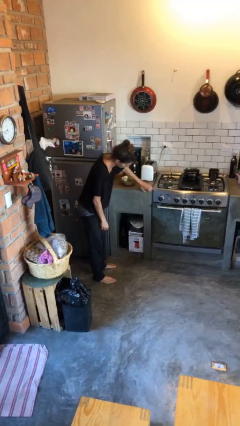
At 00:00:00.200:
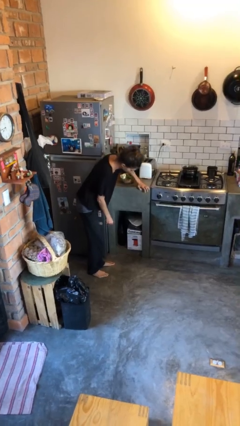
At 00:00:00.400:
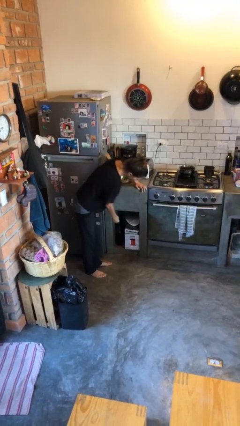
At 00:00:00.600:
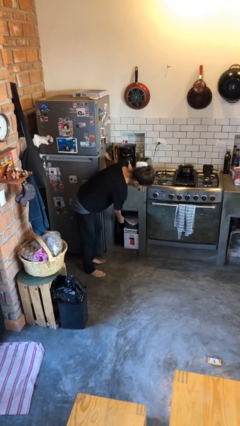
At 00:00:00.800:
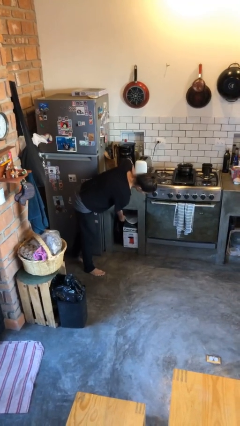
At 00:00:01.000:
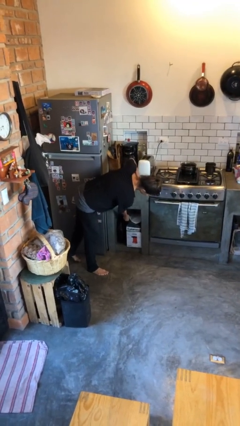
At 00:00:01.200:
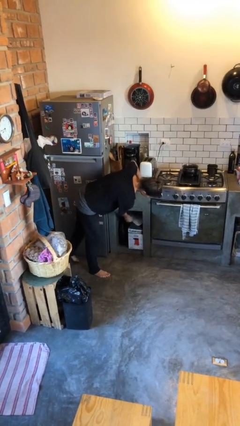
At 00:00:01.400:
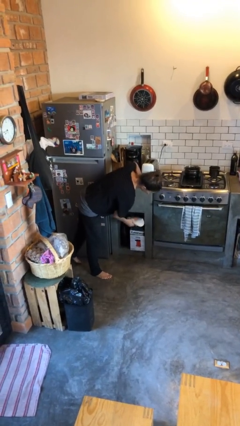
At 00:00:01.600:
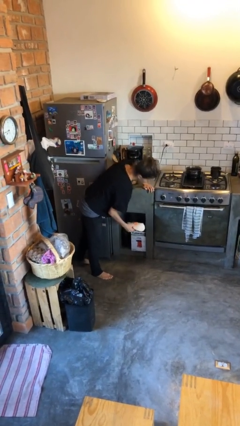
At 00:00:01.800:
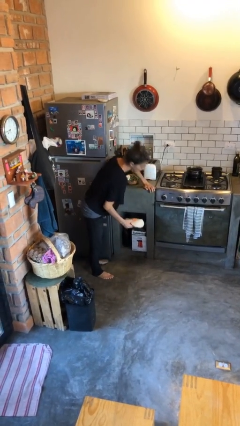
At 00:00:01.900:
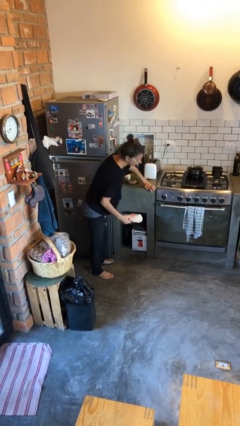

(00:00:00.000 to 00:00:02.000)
person picks up object from cabinet

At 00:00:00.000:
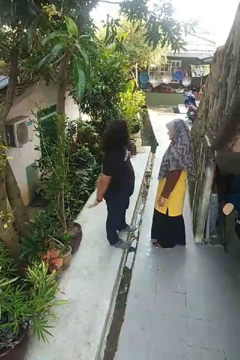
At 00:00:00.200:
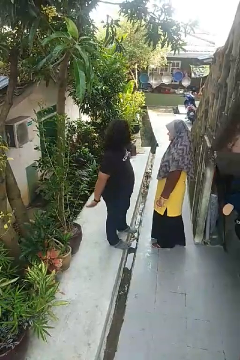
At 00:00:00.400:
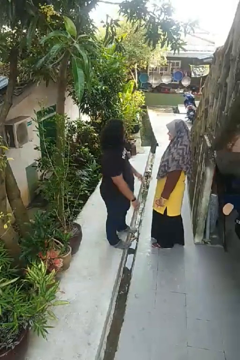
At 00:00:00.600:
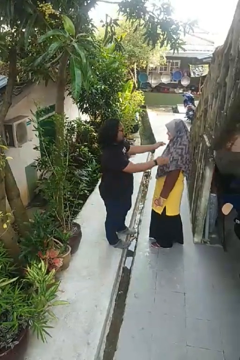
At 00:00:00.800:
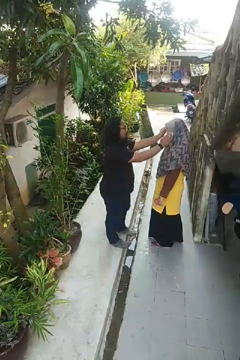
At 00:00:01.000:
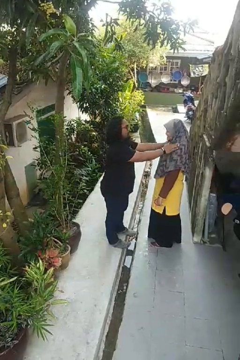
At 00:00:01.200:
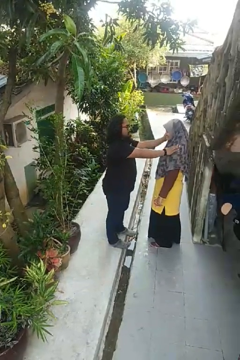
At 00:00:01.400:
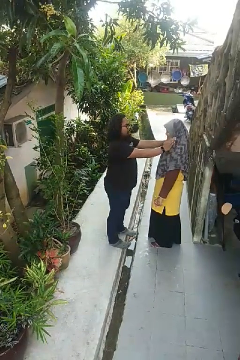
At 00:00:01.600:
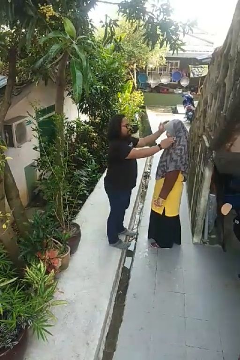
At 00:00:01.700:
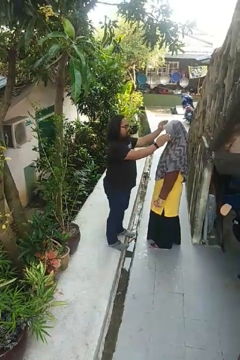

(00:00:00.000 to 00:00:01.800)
person pounds shoulders of person

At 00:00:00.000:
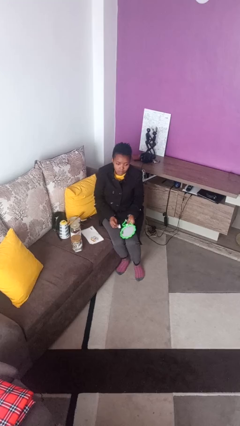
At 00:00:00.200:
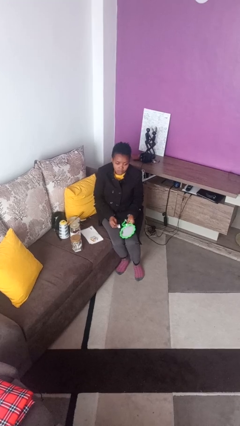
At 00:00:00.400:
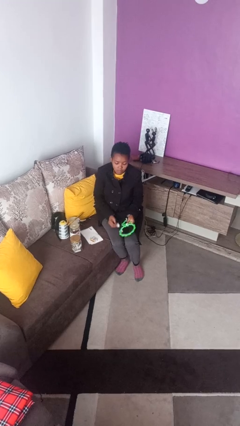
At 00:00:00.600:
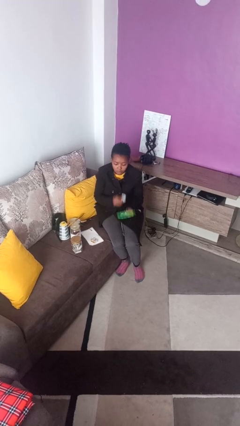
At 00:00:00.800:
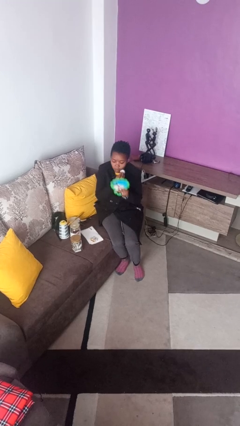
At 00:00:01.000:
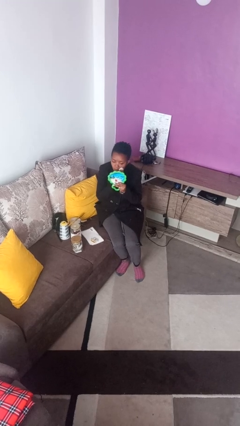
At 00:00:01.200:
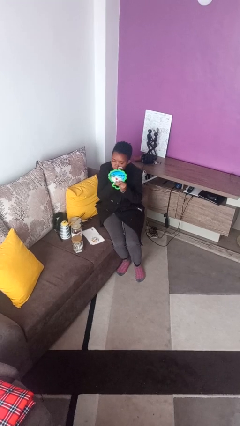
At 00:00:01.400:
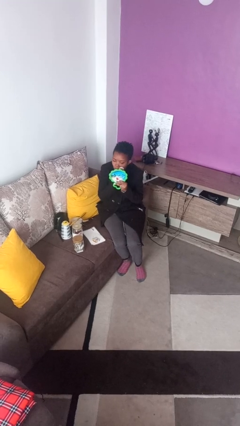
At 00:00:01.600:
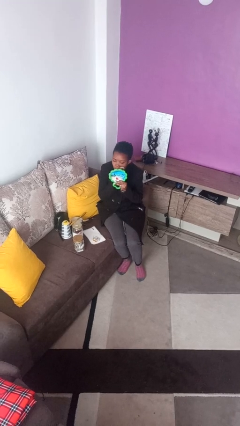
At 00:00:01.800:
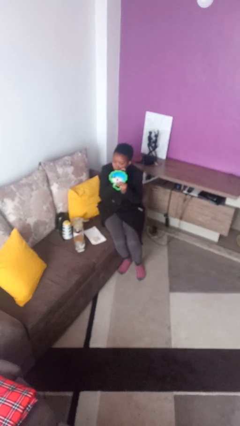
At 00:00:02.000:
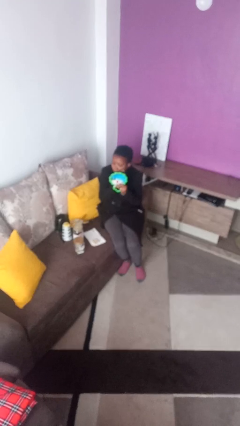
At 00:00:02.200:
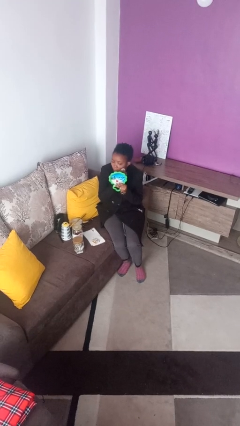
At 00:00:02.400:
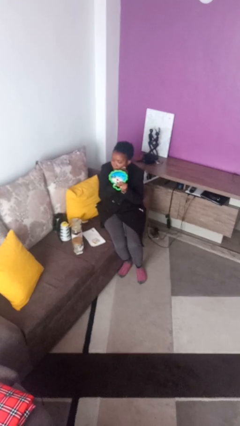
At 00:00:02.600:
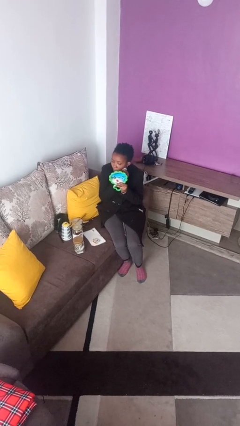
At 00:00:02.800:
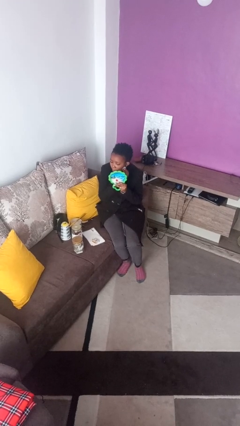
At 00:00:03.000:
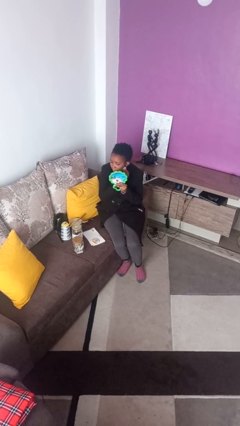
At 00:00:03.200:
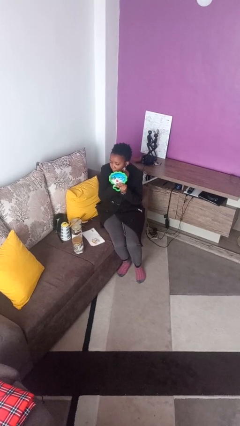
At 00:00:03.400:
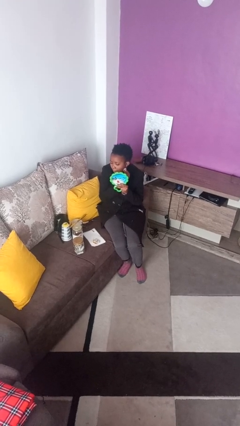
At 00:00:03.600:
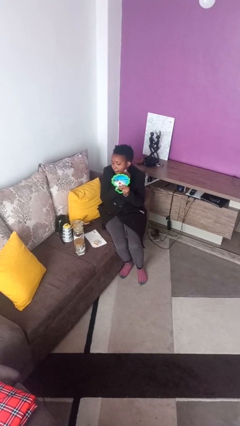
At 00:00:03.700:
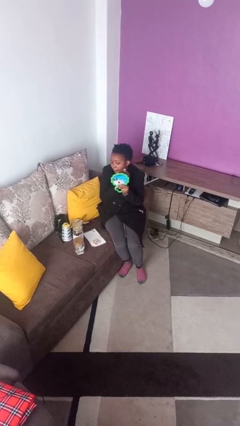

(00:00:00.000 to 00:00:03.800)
person applies foundation makeup

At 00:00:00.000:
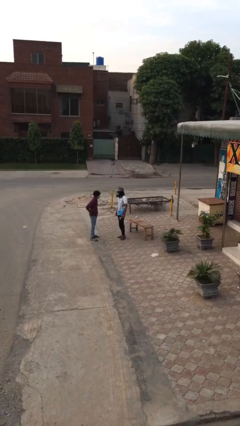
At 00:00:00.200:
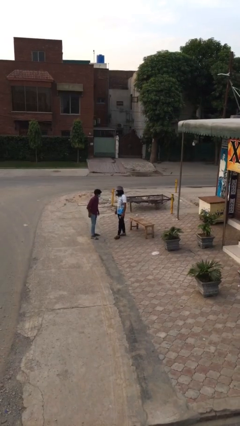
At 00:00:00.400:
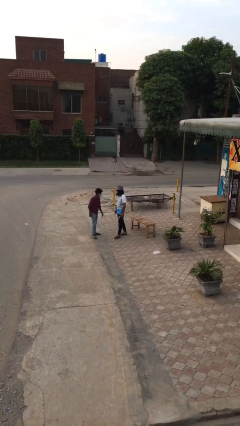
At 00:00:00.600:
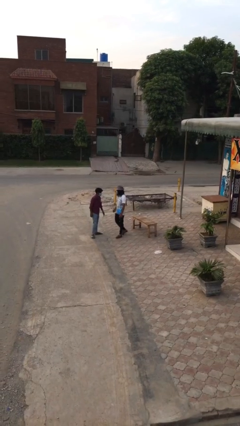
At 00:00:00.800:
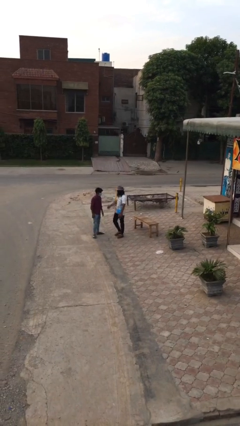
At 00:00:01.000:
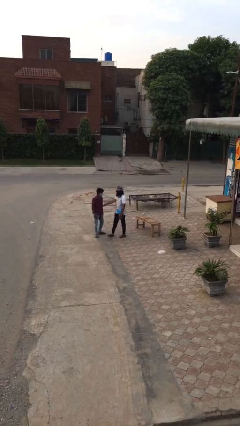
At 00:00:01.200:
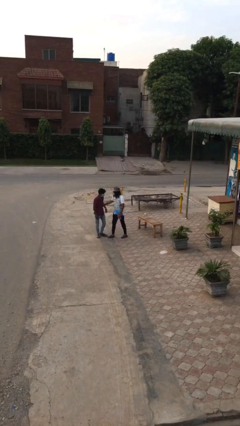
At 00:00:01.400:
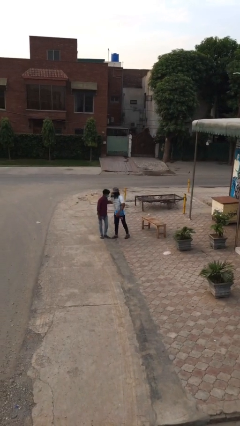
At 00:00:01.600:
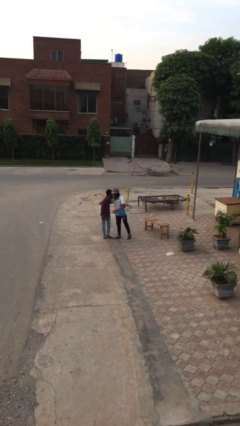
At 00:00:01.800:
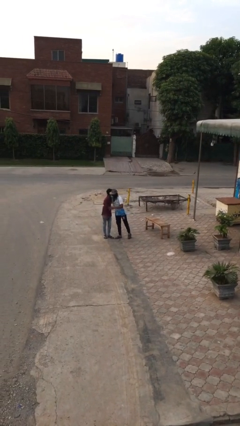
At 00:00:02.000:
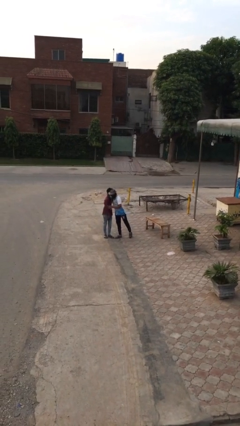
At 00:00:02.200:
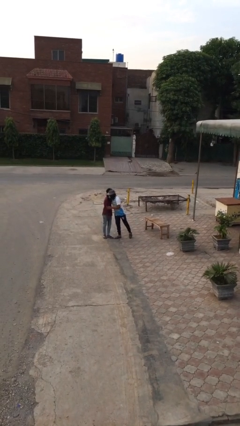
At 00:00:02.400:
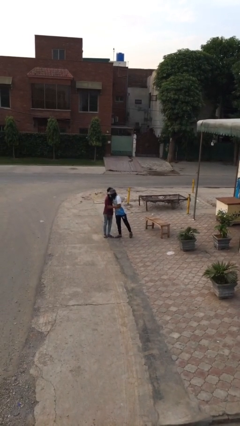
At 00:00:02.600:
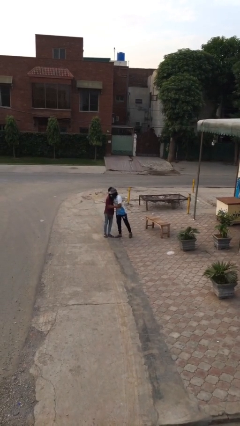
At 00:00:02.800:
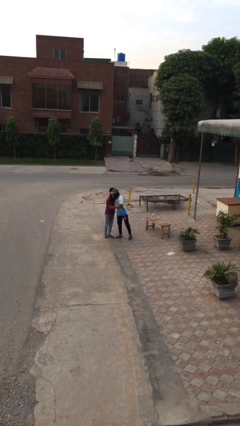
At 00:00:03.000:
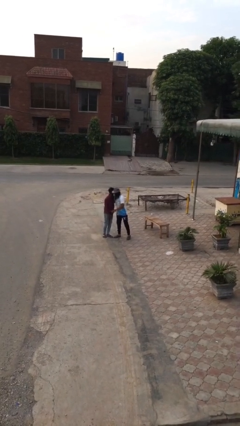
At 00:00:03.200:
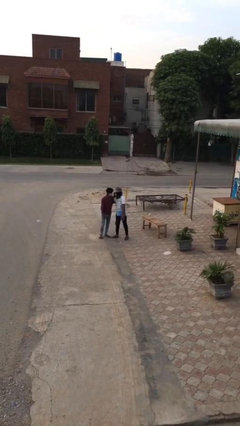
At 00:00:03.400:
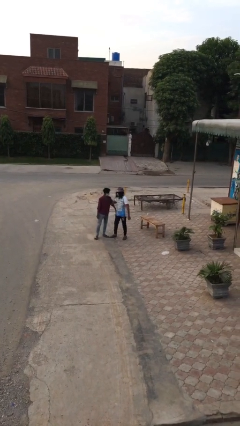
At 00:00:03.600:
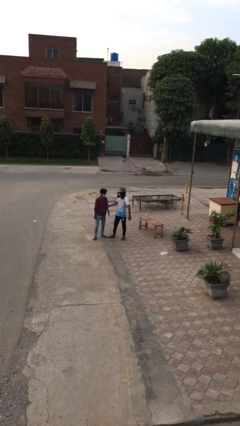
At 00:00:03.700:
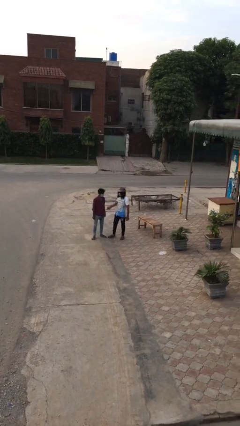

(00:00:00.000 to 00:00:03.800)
person embraces person

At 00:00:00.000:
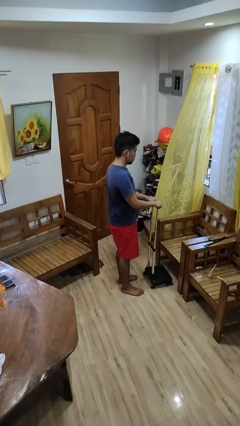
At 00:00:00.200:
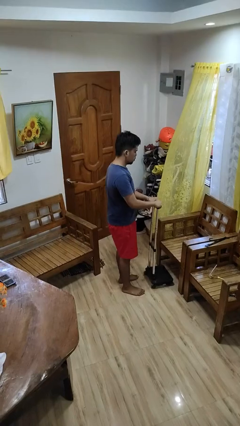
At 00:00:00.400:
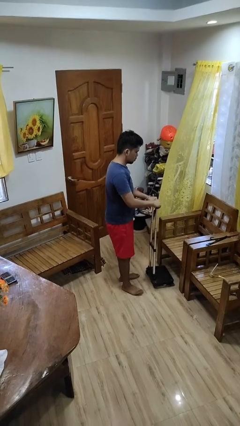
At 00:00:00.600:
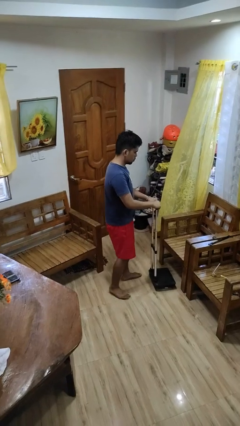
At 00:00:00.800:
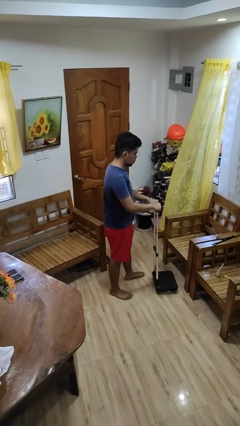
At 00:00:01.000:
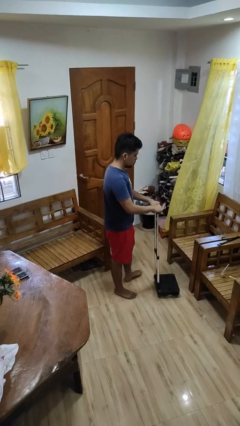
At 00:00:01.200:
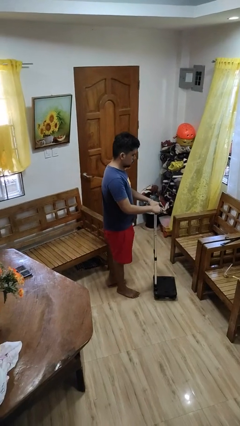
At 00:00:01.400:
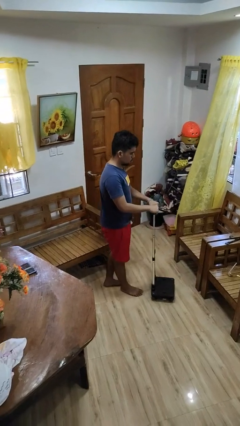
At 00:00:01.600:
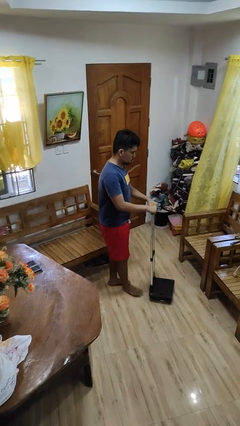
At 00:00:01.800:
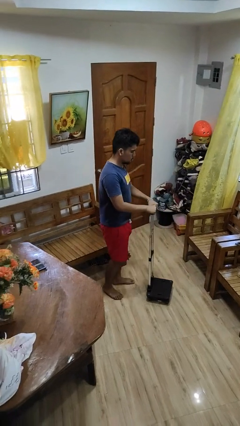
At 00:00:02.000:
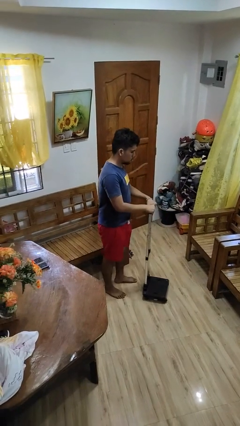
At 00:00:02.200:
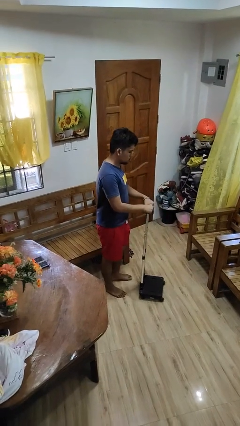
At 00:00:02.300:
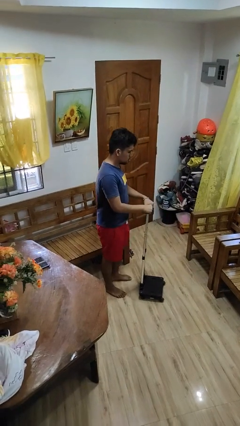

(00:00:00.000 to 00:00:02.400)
person pulls wheeled cart

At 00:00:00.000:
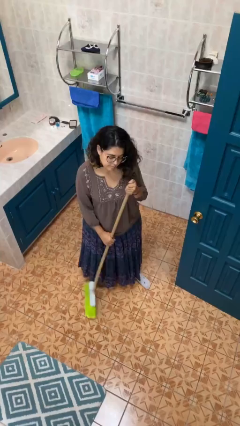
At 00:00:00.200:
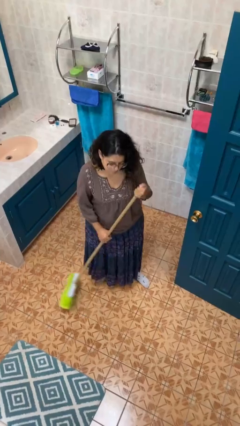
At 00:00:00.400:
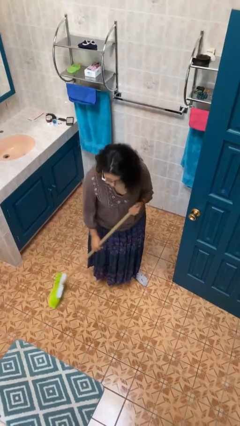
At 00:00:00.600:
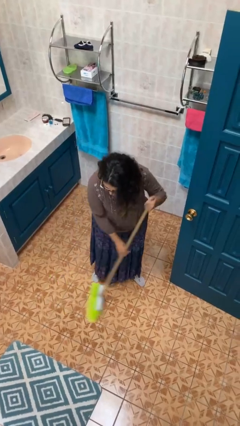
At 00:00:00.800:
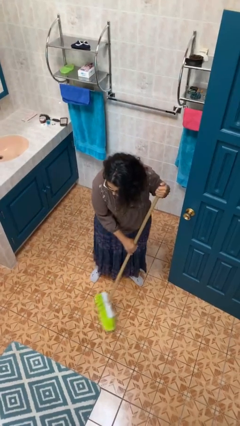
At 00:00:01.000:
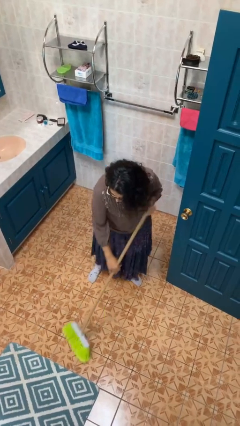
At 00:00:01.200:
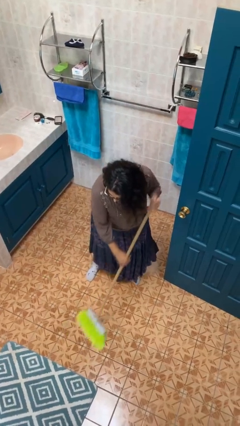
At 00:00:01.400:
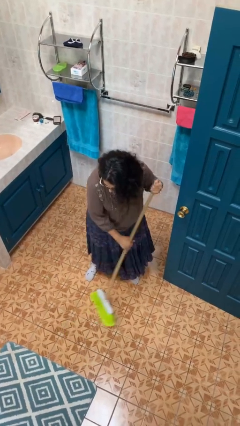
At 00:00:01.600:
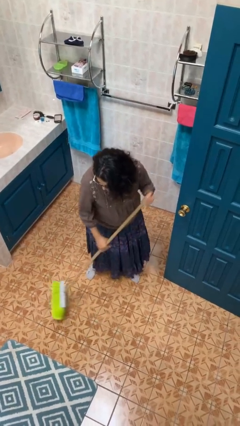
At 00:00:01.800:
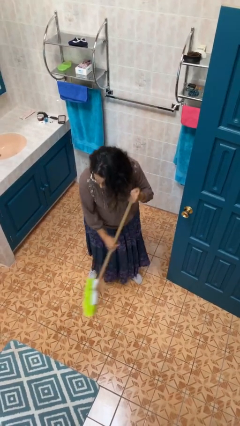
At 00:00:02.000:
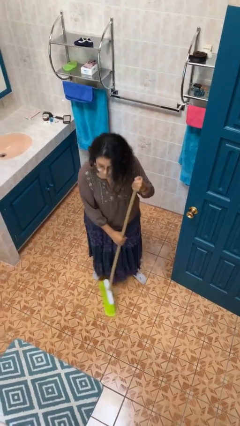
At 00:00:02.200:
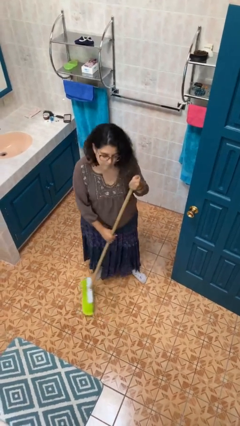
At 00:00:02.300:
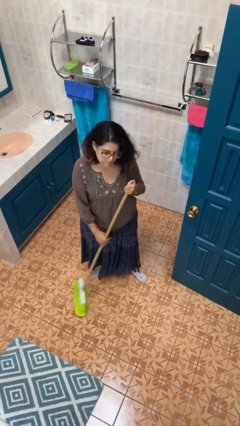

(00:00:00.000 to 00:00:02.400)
person sweeps floor

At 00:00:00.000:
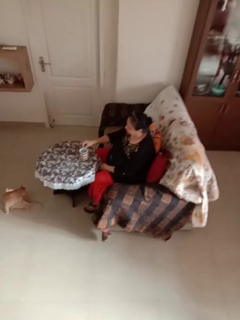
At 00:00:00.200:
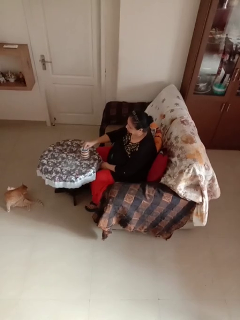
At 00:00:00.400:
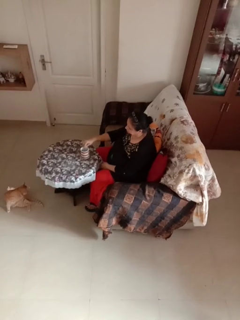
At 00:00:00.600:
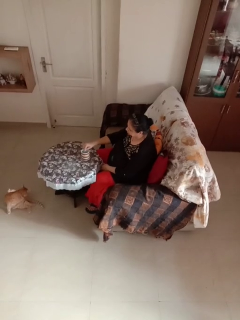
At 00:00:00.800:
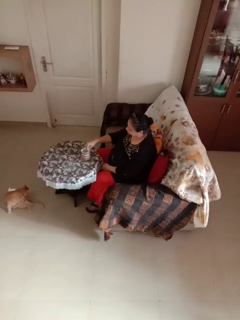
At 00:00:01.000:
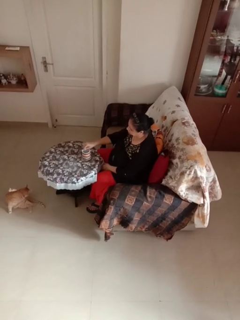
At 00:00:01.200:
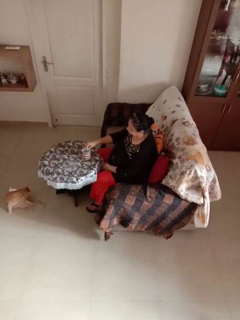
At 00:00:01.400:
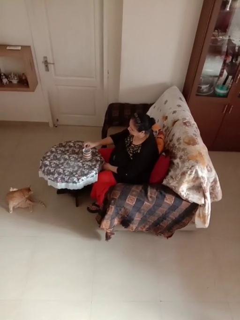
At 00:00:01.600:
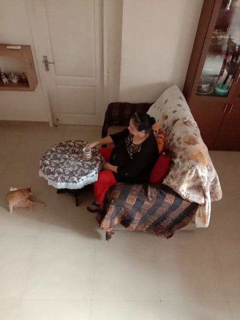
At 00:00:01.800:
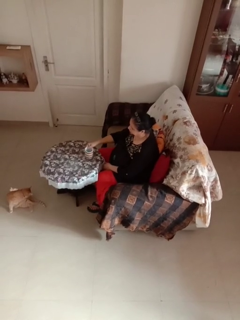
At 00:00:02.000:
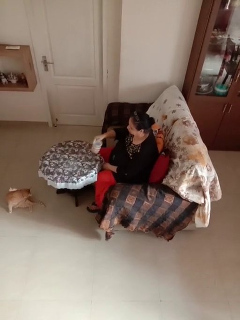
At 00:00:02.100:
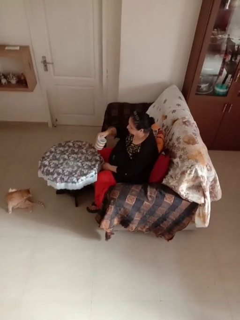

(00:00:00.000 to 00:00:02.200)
person stirs mug
